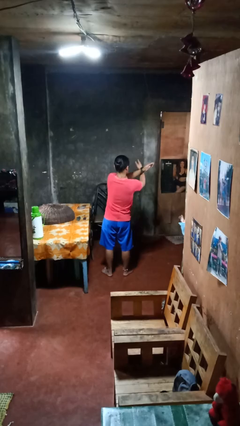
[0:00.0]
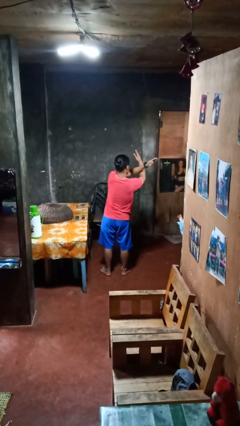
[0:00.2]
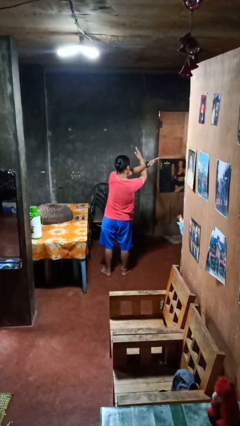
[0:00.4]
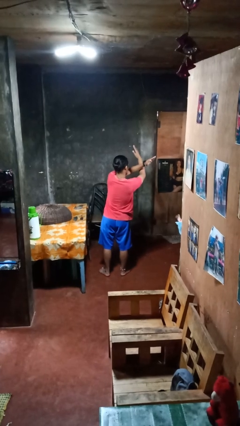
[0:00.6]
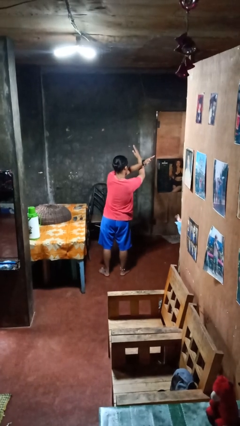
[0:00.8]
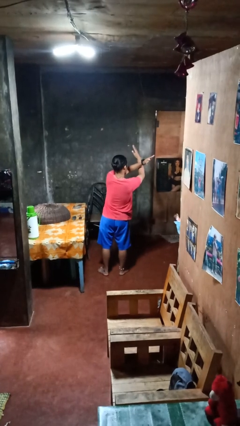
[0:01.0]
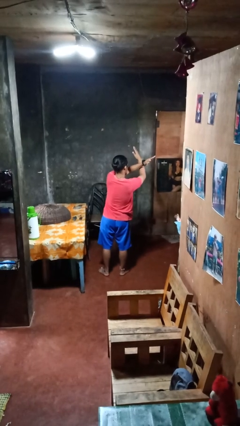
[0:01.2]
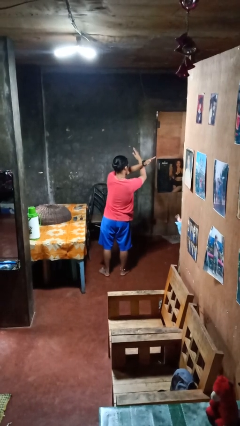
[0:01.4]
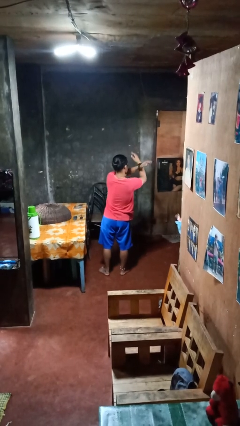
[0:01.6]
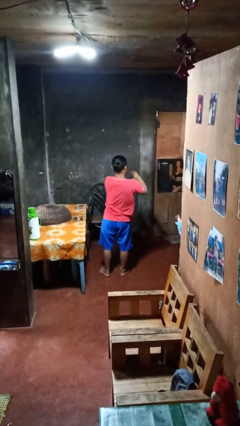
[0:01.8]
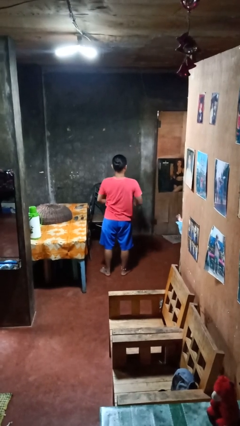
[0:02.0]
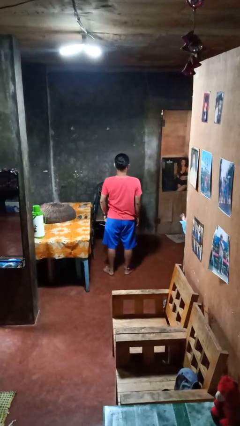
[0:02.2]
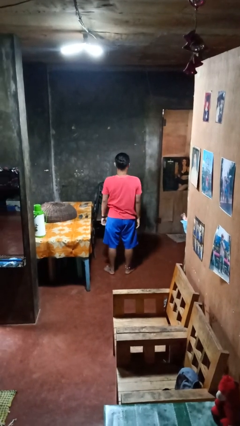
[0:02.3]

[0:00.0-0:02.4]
person gestures arms x

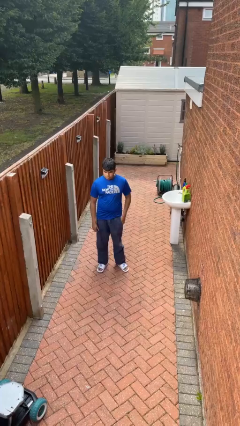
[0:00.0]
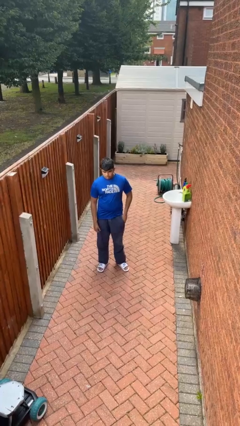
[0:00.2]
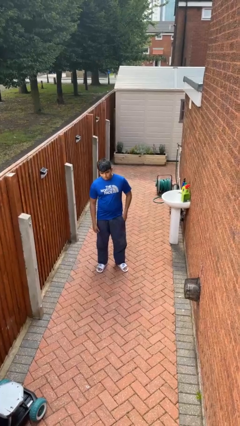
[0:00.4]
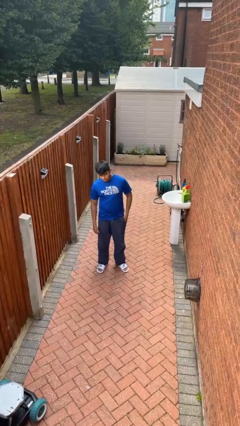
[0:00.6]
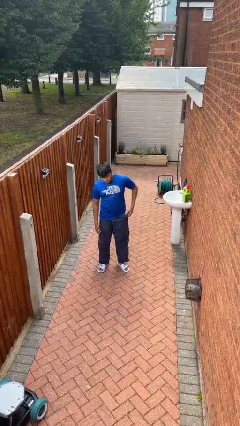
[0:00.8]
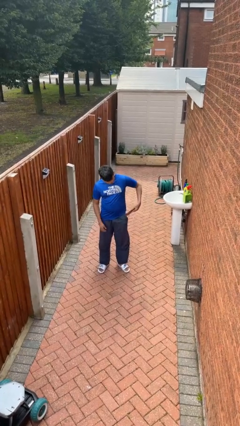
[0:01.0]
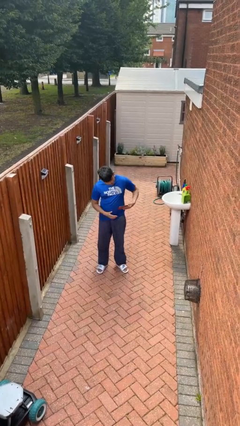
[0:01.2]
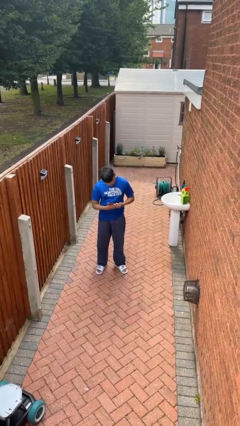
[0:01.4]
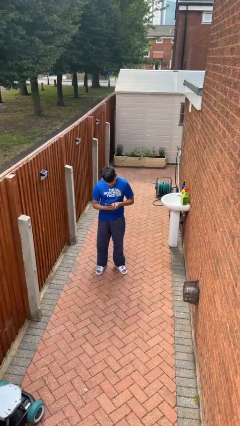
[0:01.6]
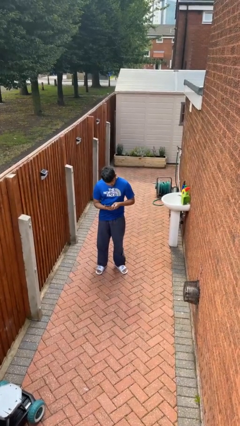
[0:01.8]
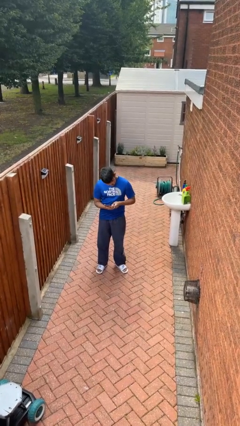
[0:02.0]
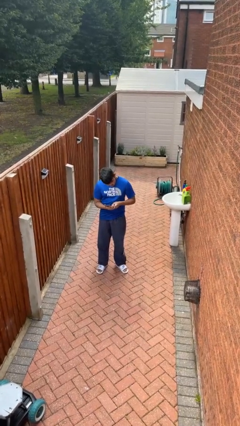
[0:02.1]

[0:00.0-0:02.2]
person takes phone from pocket

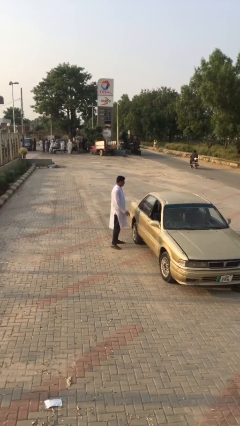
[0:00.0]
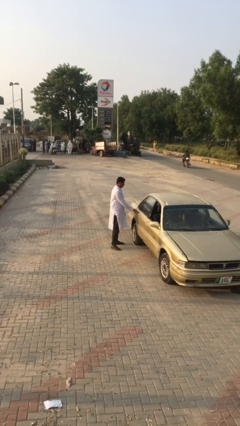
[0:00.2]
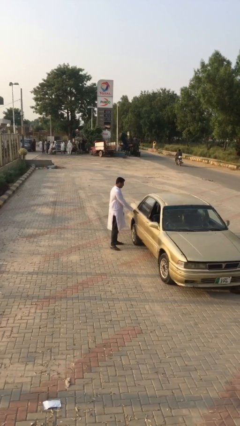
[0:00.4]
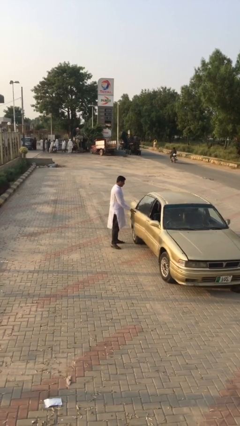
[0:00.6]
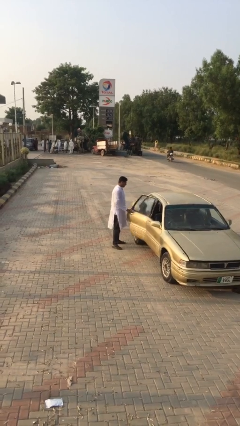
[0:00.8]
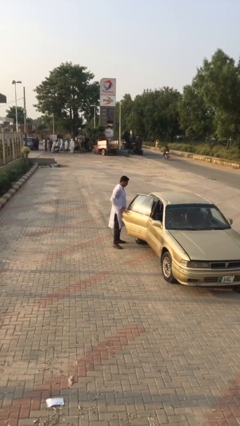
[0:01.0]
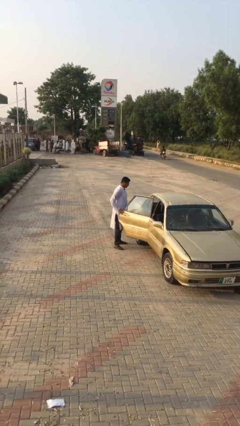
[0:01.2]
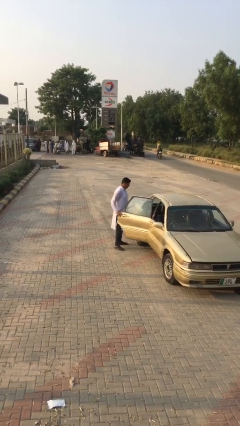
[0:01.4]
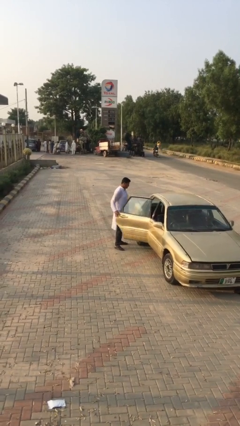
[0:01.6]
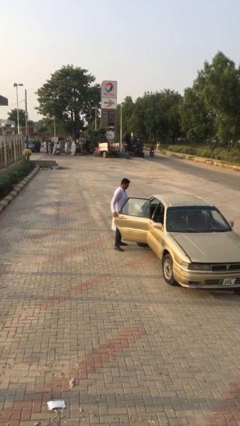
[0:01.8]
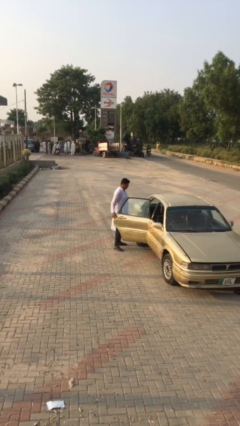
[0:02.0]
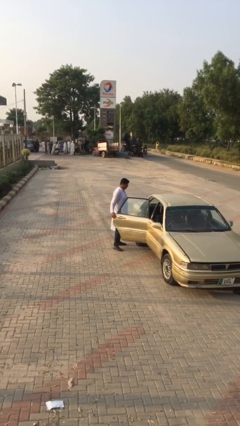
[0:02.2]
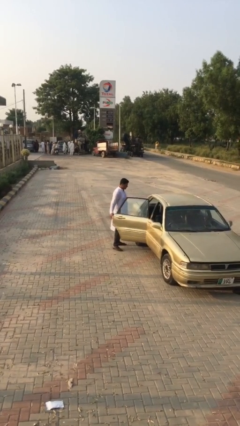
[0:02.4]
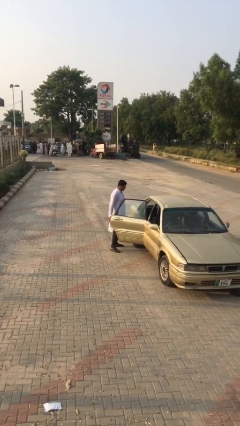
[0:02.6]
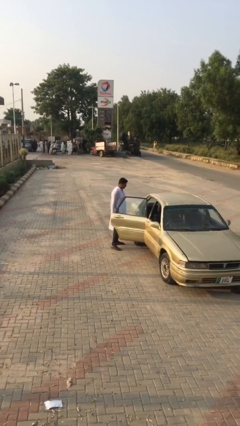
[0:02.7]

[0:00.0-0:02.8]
person opens car door

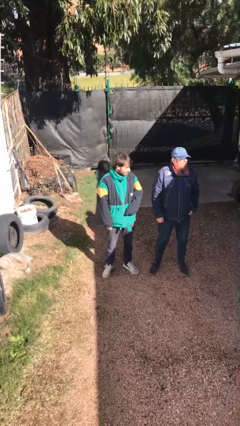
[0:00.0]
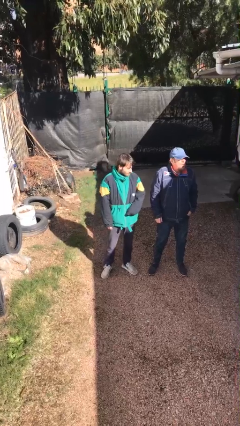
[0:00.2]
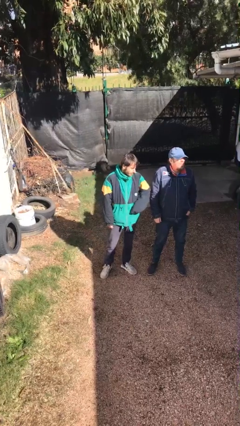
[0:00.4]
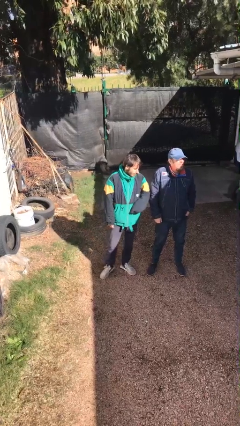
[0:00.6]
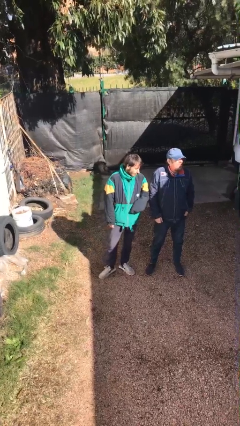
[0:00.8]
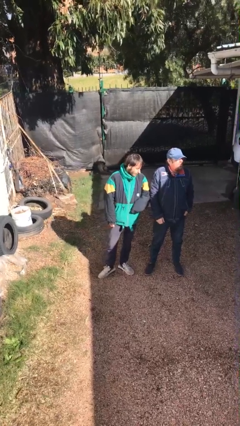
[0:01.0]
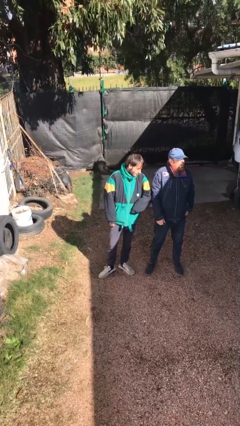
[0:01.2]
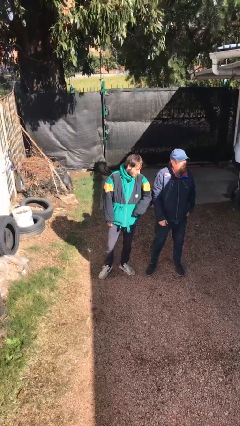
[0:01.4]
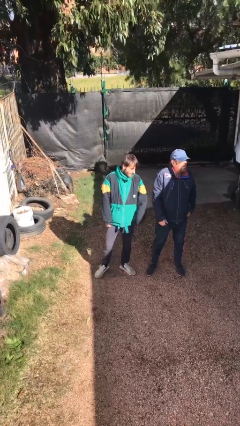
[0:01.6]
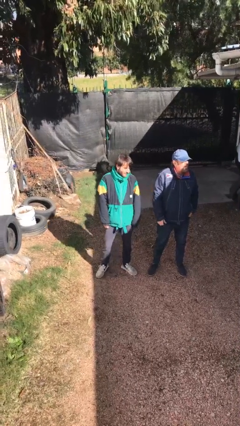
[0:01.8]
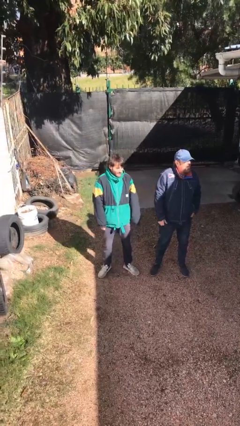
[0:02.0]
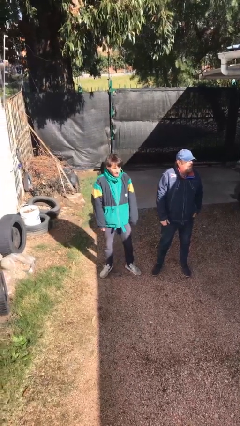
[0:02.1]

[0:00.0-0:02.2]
person nudges person with elbow

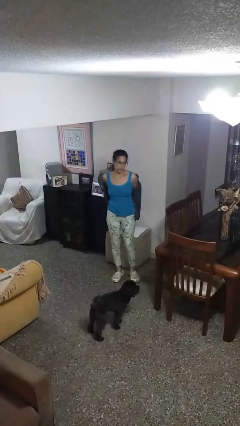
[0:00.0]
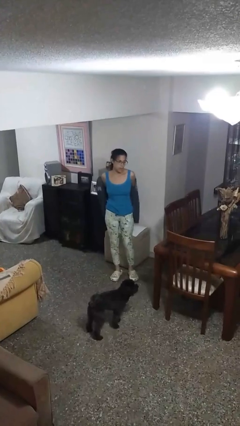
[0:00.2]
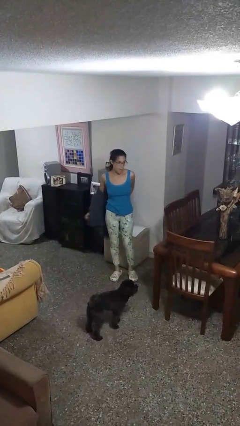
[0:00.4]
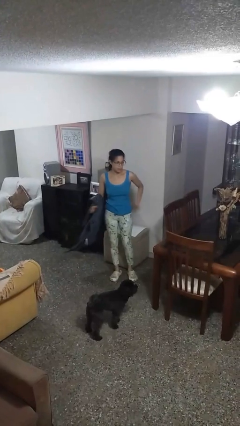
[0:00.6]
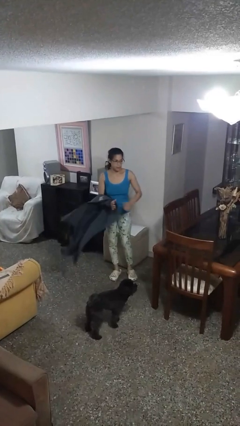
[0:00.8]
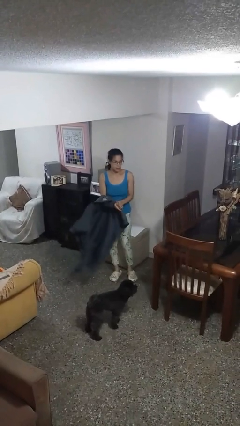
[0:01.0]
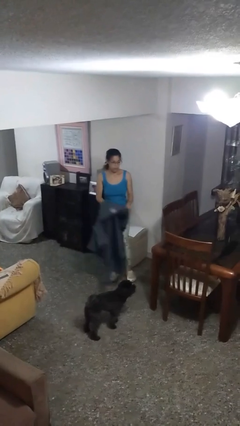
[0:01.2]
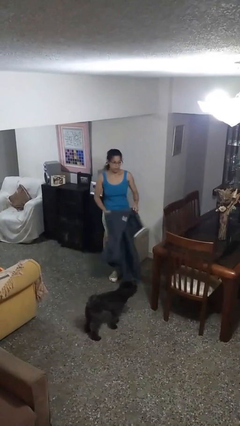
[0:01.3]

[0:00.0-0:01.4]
person takes off jacket

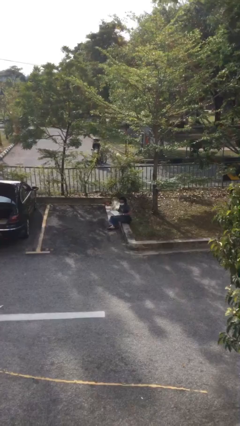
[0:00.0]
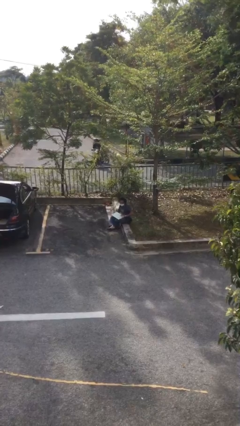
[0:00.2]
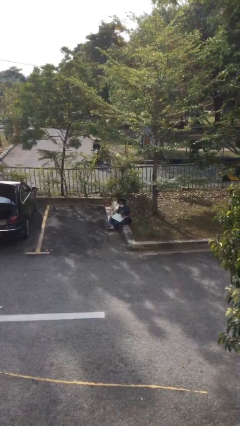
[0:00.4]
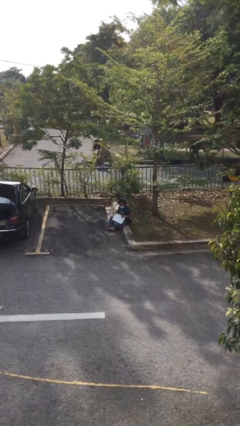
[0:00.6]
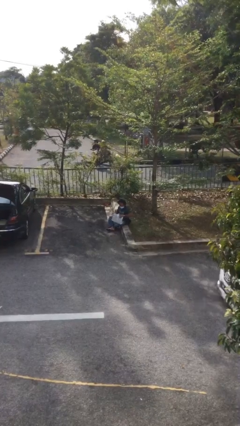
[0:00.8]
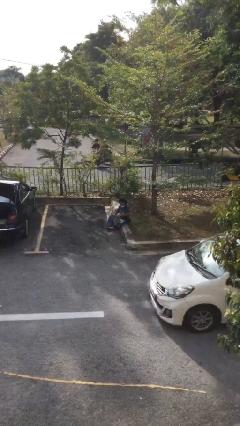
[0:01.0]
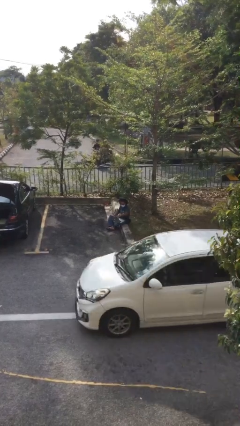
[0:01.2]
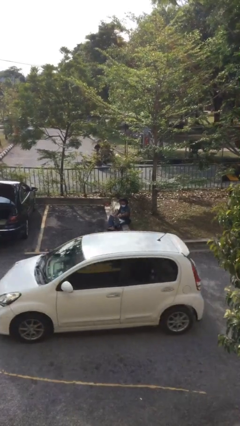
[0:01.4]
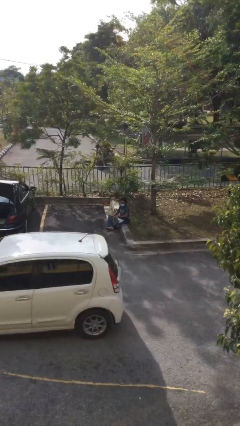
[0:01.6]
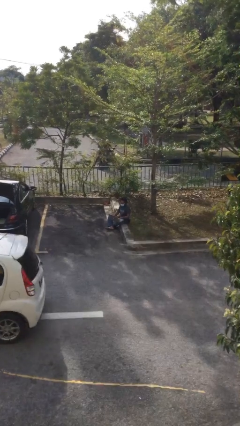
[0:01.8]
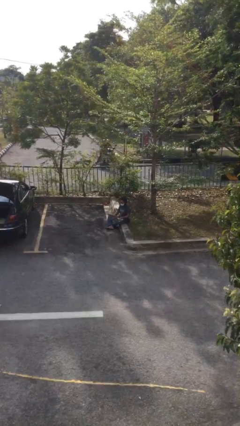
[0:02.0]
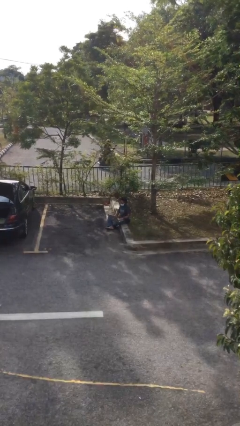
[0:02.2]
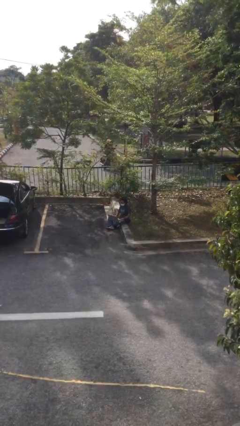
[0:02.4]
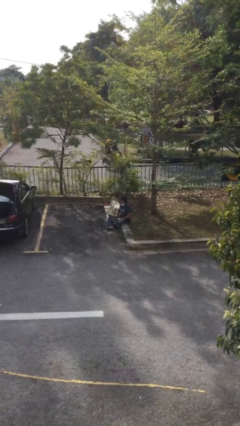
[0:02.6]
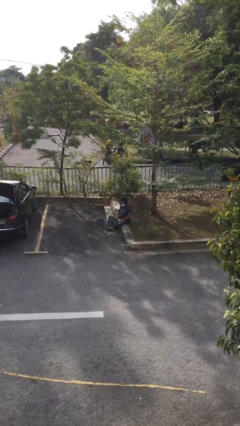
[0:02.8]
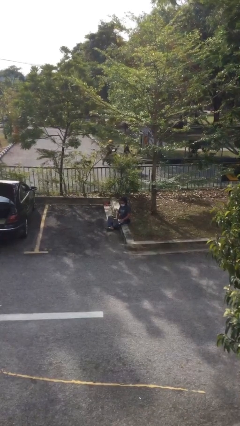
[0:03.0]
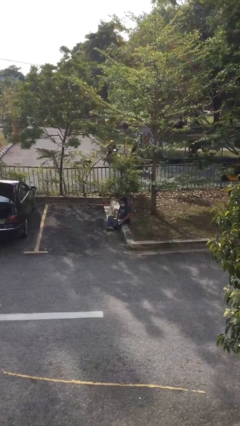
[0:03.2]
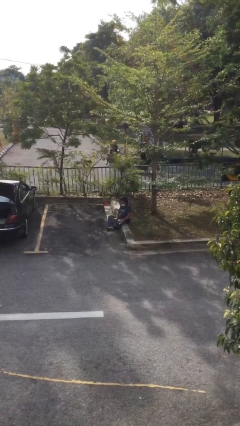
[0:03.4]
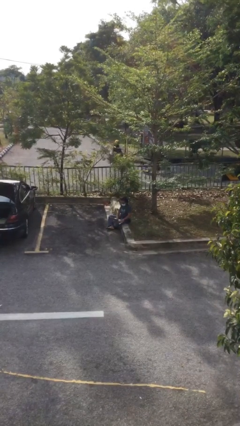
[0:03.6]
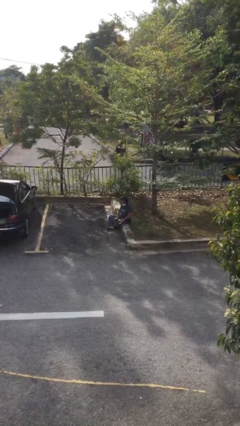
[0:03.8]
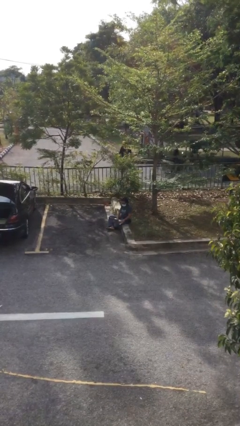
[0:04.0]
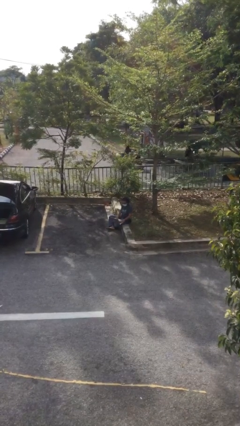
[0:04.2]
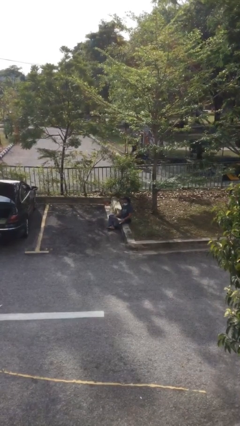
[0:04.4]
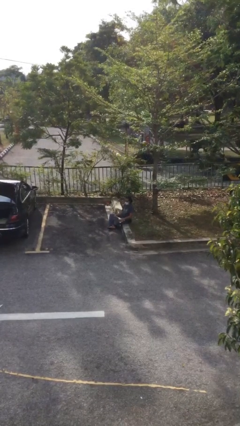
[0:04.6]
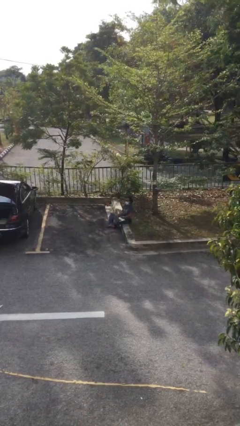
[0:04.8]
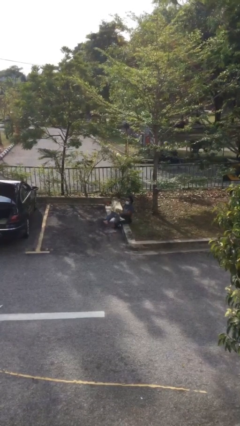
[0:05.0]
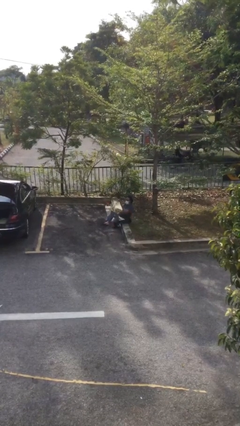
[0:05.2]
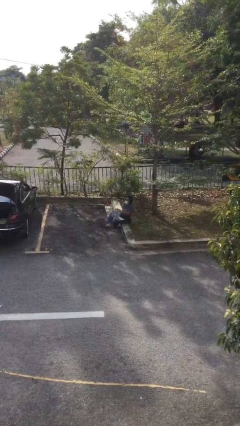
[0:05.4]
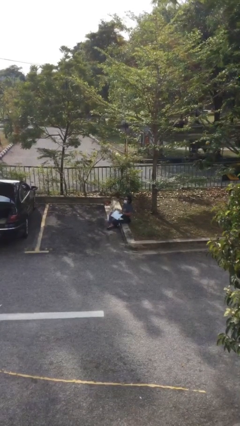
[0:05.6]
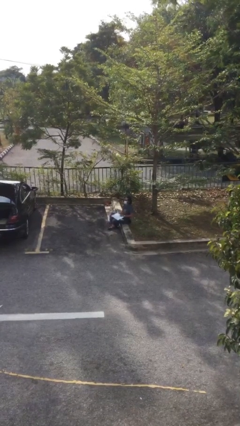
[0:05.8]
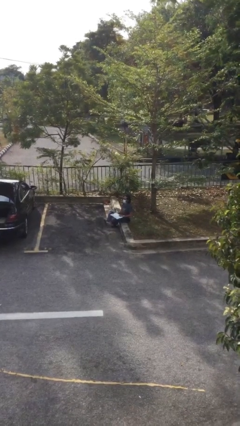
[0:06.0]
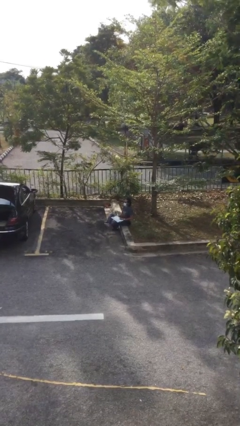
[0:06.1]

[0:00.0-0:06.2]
person interacts with laptop
